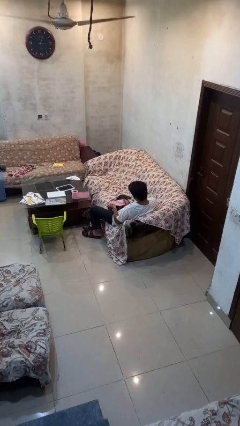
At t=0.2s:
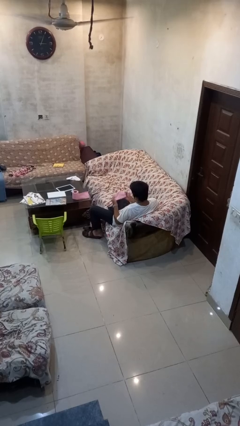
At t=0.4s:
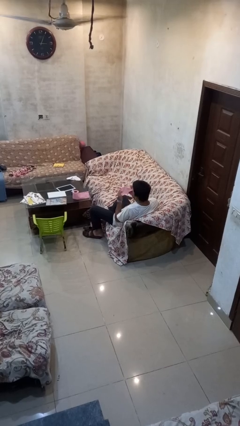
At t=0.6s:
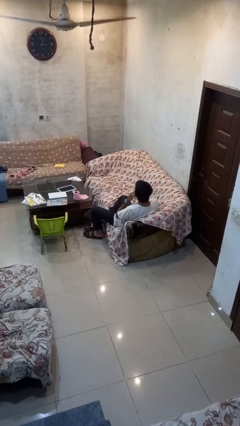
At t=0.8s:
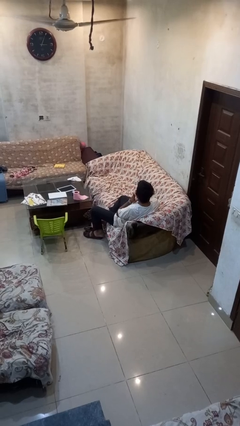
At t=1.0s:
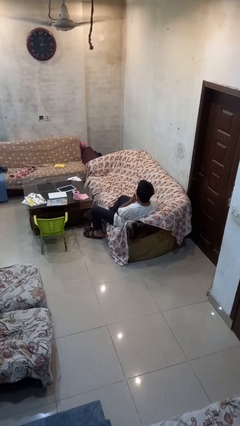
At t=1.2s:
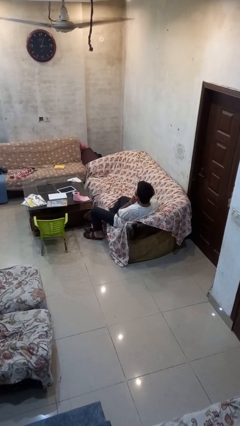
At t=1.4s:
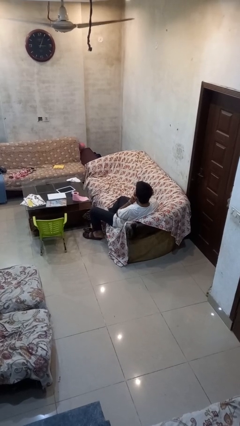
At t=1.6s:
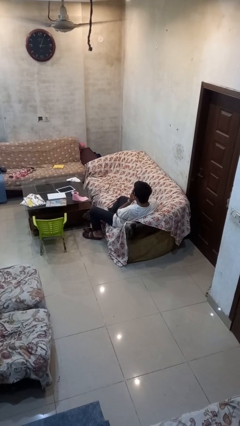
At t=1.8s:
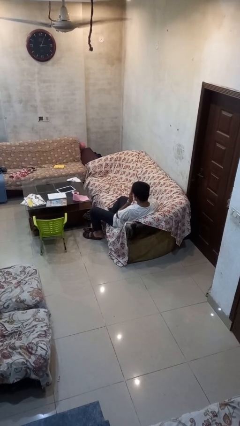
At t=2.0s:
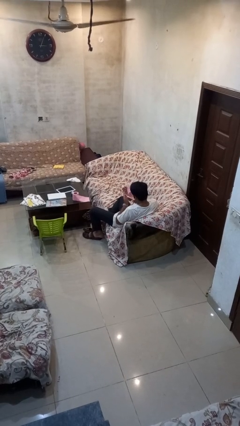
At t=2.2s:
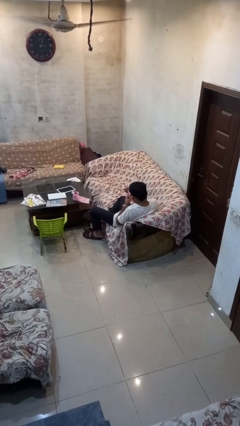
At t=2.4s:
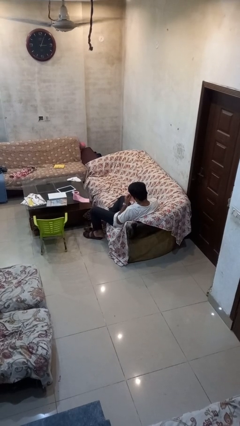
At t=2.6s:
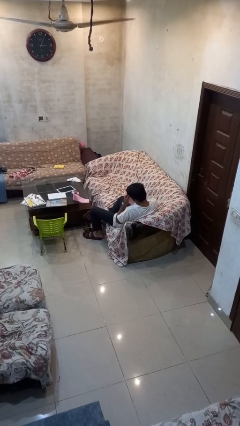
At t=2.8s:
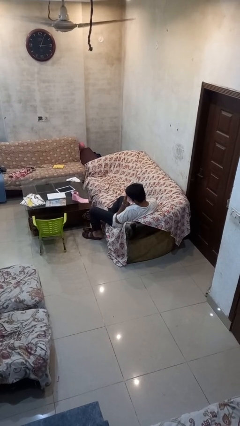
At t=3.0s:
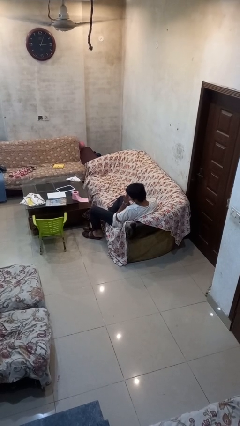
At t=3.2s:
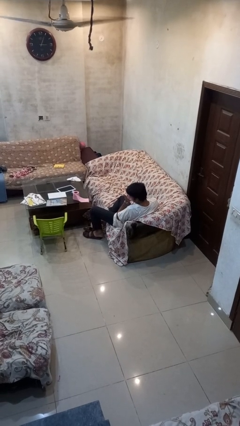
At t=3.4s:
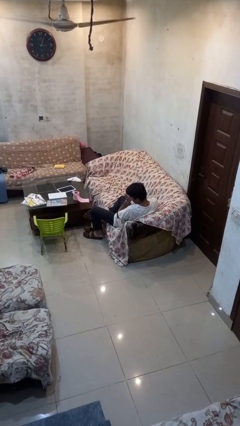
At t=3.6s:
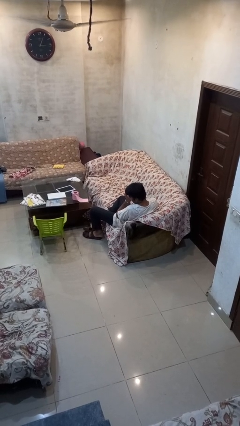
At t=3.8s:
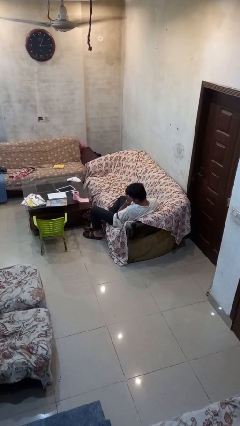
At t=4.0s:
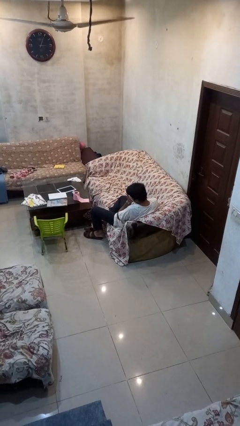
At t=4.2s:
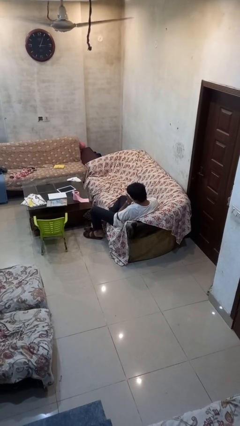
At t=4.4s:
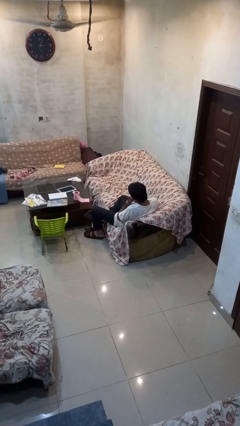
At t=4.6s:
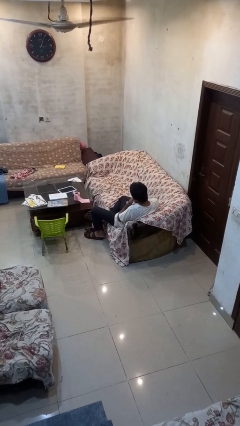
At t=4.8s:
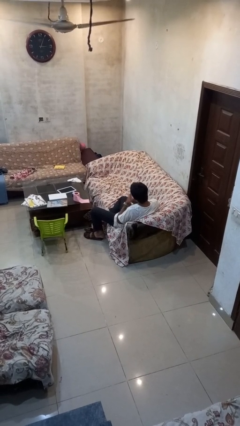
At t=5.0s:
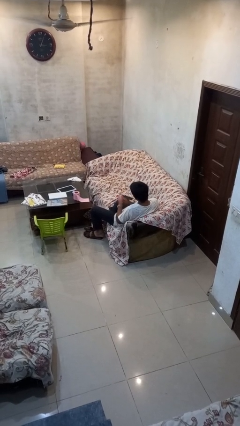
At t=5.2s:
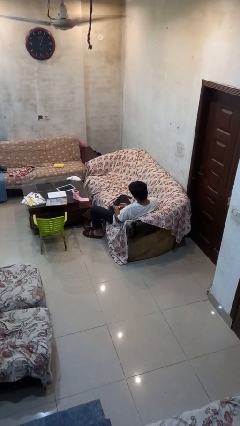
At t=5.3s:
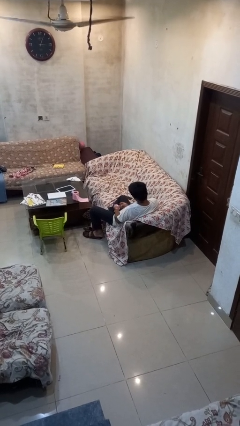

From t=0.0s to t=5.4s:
person wipes mouth with napkin

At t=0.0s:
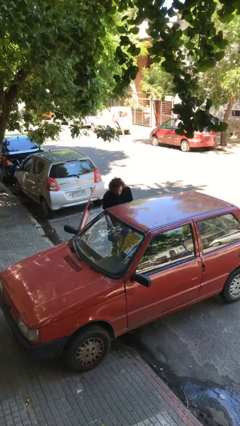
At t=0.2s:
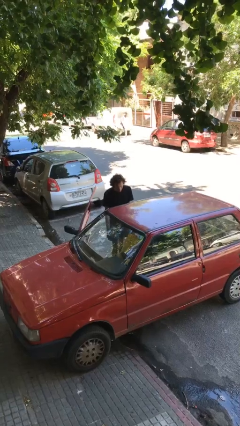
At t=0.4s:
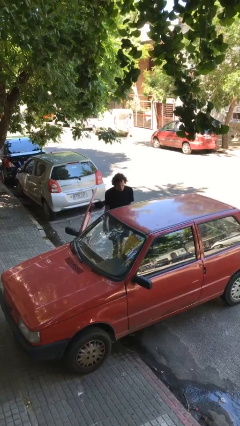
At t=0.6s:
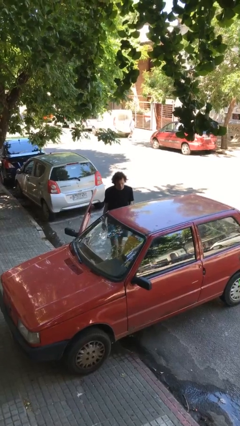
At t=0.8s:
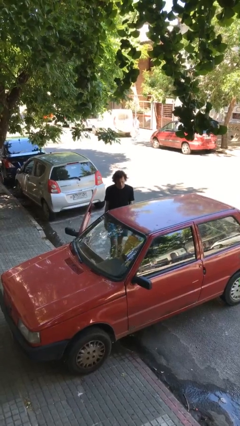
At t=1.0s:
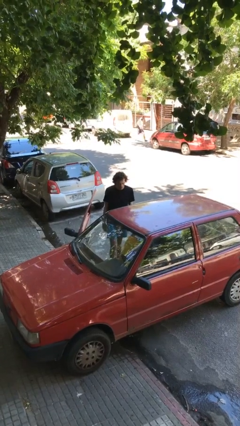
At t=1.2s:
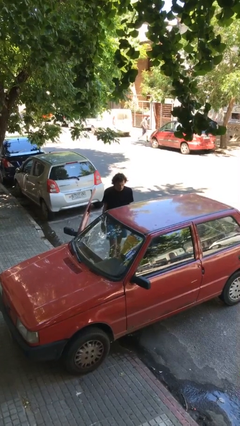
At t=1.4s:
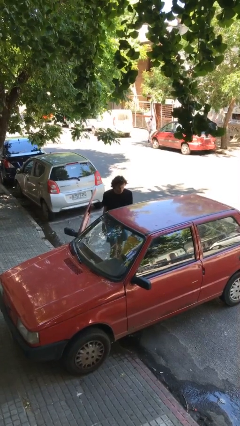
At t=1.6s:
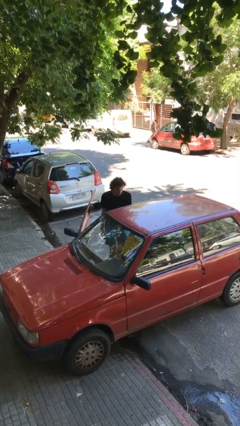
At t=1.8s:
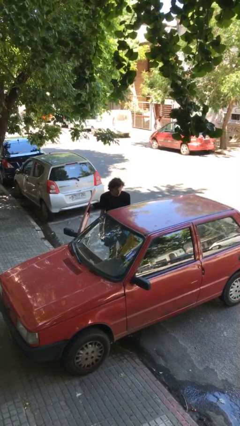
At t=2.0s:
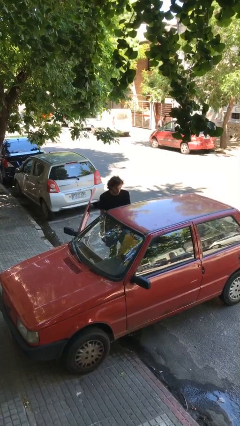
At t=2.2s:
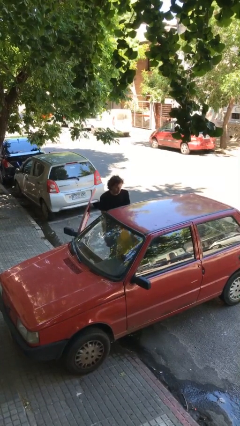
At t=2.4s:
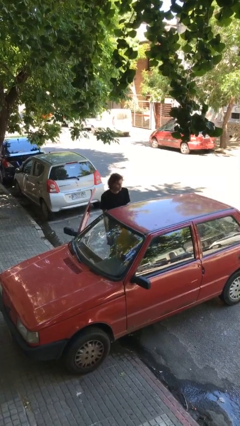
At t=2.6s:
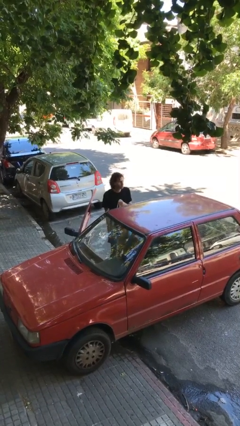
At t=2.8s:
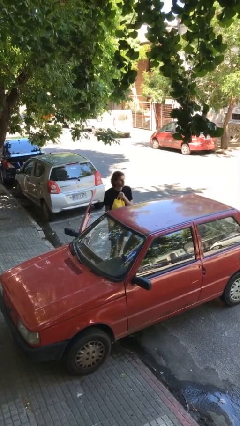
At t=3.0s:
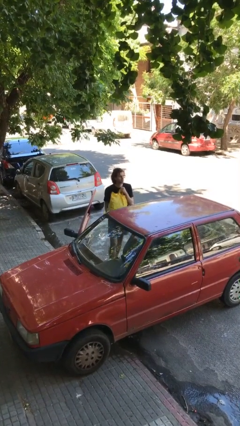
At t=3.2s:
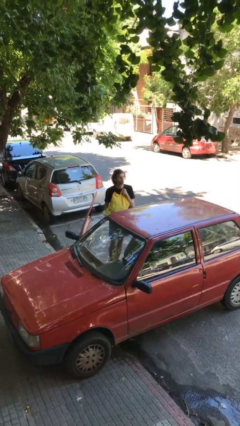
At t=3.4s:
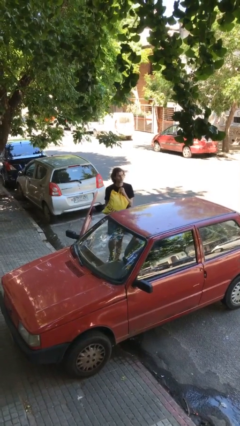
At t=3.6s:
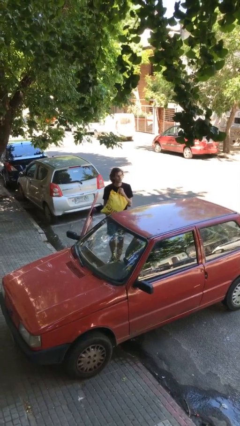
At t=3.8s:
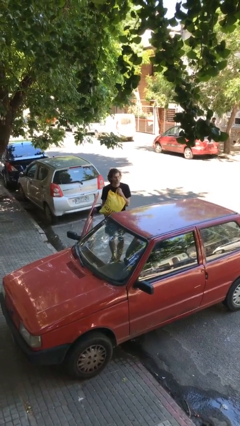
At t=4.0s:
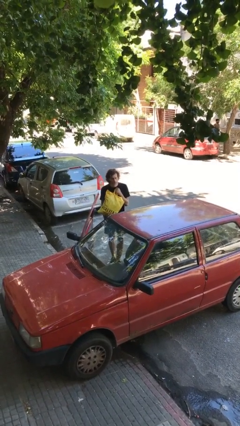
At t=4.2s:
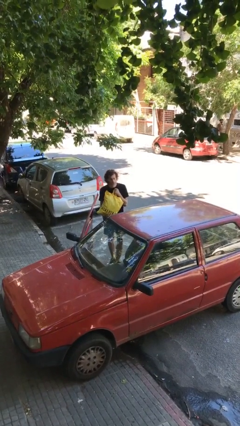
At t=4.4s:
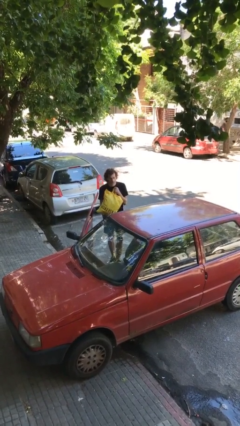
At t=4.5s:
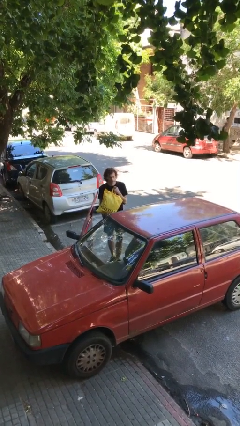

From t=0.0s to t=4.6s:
person unloads car

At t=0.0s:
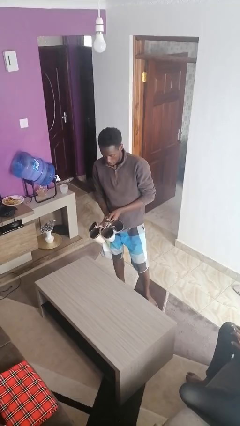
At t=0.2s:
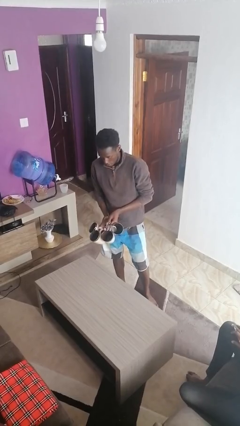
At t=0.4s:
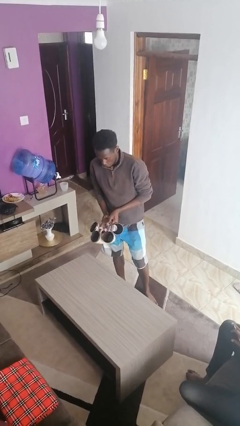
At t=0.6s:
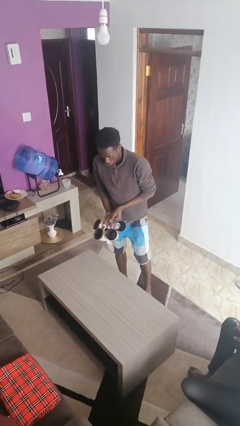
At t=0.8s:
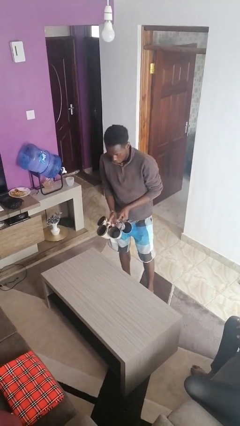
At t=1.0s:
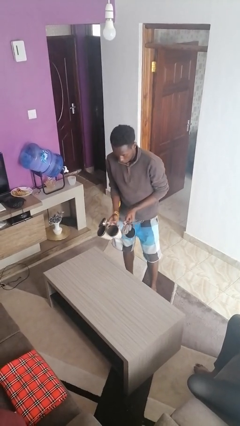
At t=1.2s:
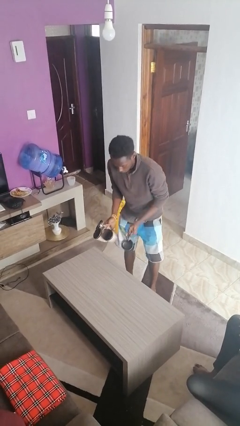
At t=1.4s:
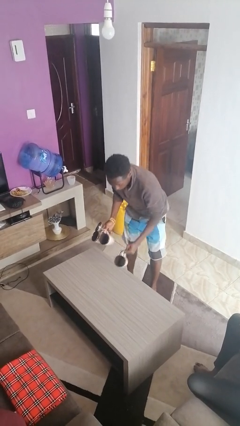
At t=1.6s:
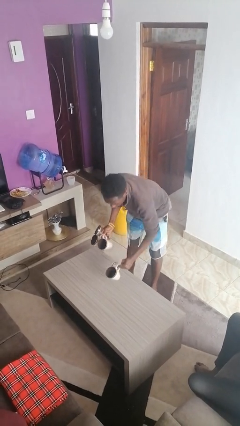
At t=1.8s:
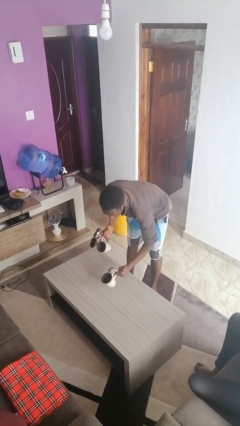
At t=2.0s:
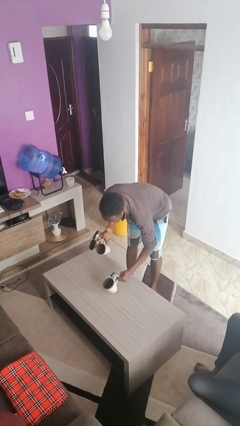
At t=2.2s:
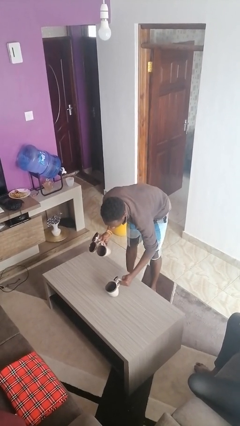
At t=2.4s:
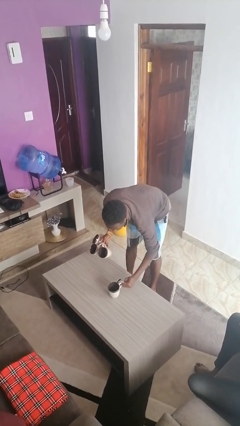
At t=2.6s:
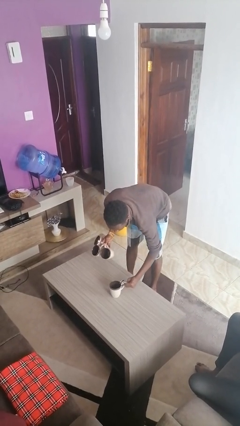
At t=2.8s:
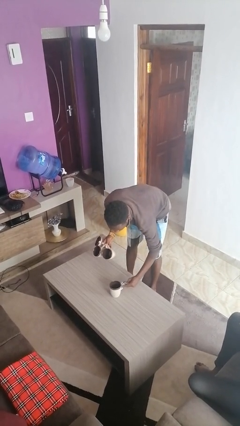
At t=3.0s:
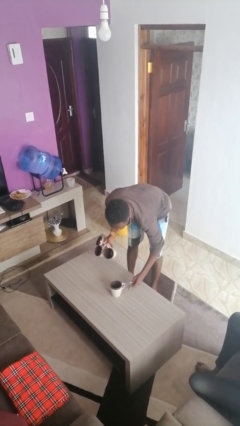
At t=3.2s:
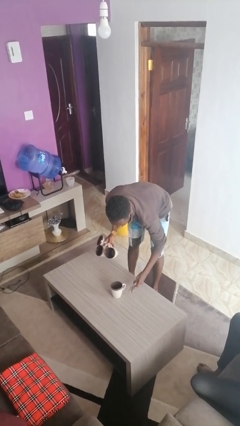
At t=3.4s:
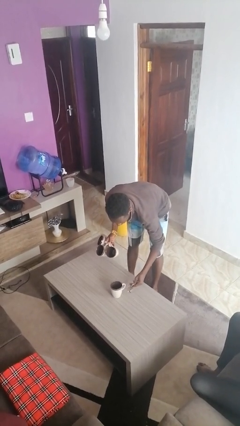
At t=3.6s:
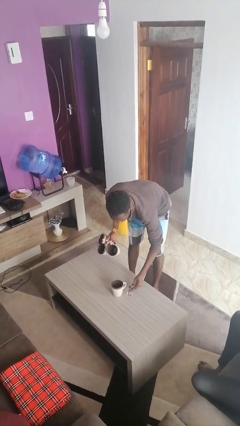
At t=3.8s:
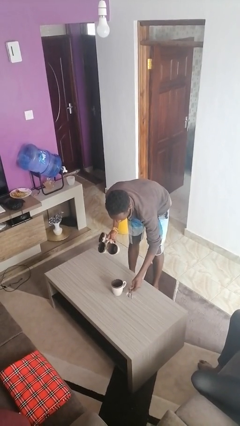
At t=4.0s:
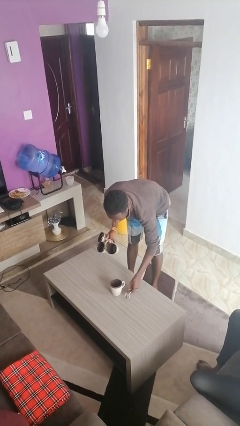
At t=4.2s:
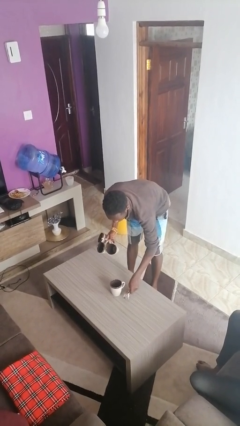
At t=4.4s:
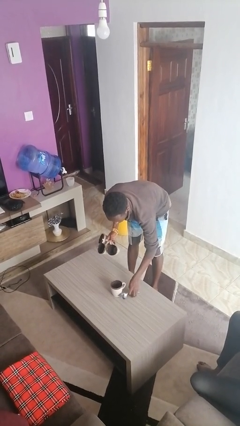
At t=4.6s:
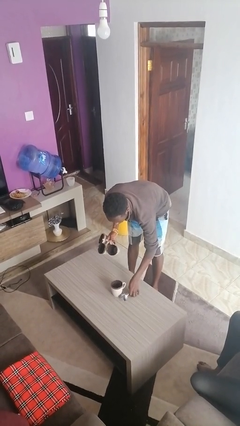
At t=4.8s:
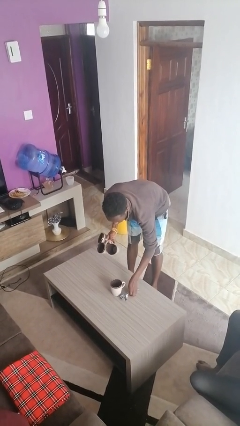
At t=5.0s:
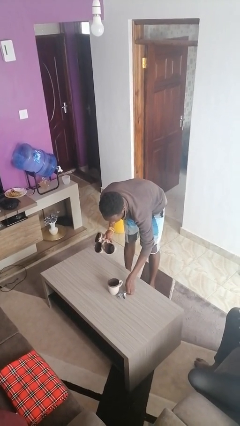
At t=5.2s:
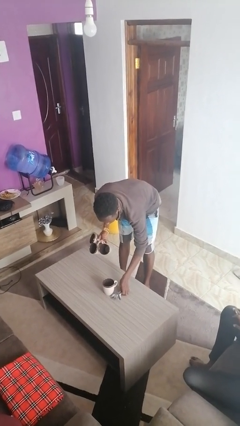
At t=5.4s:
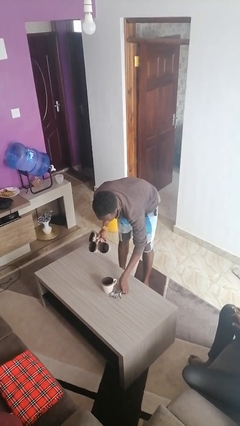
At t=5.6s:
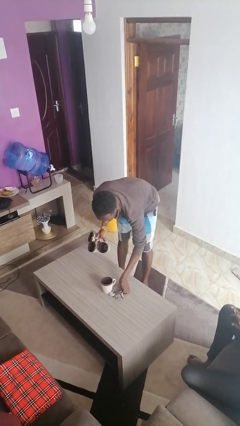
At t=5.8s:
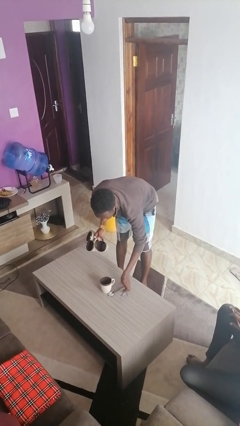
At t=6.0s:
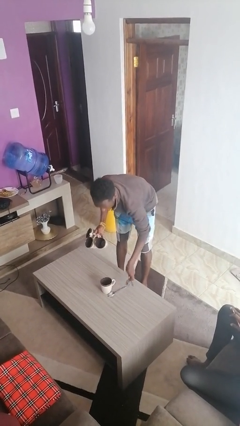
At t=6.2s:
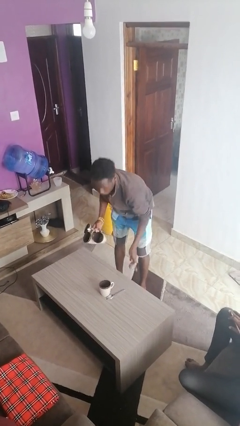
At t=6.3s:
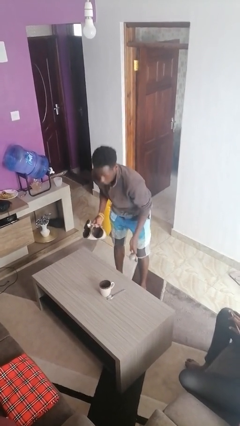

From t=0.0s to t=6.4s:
person sets table

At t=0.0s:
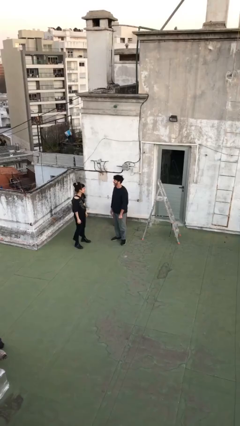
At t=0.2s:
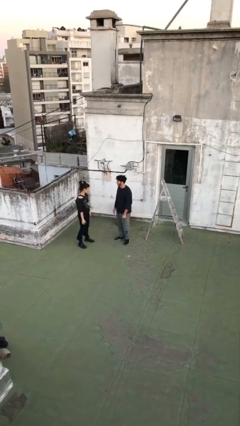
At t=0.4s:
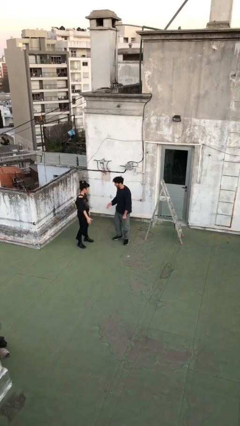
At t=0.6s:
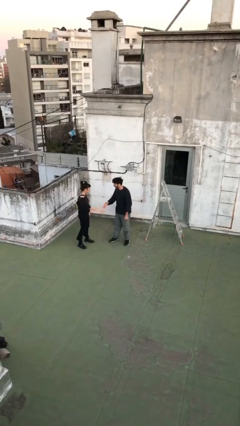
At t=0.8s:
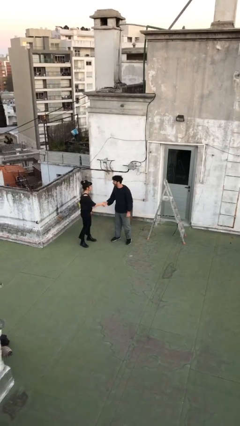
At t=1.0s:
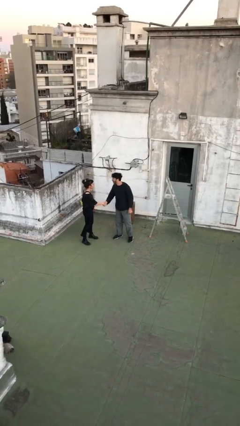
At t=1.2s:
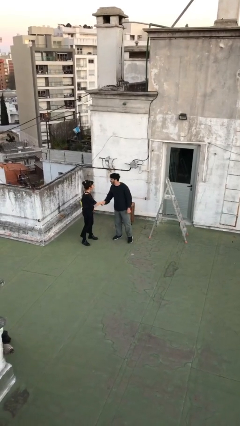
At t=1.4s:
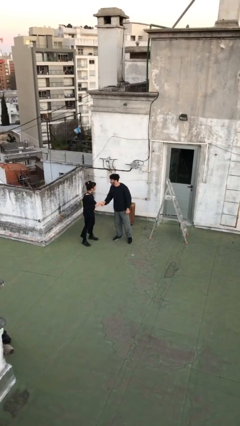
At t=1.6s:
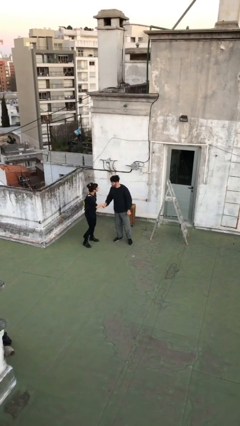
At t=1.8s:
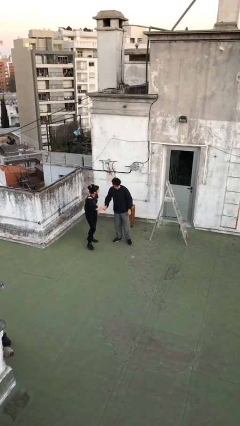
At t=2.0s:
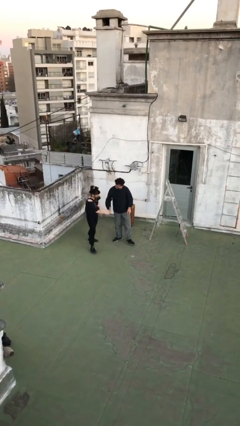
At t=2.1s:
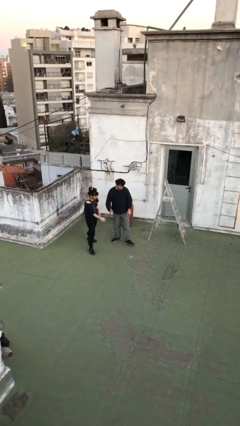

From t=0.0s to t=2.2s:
person shakes hand
